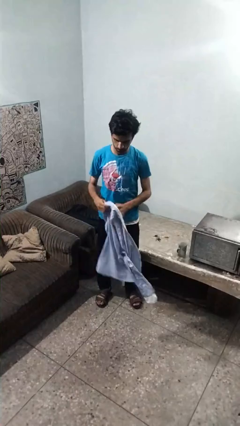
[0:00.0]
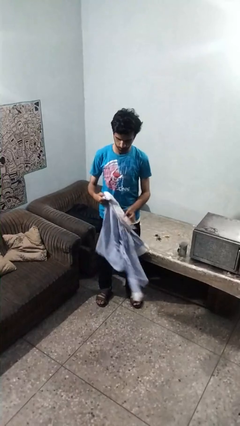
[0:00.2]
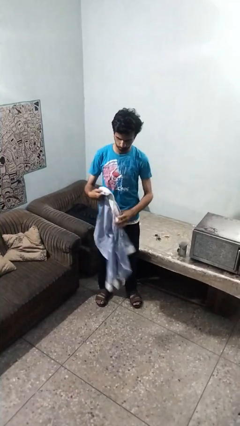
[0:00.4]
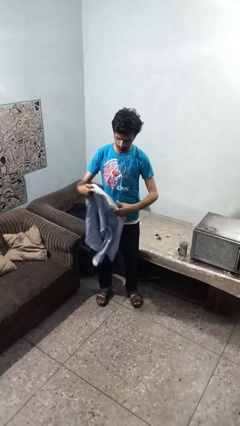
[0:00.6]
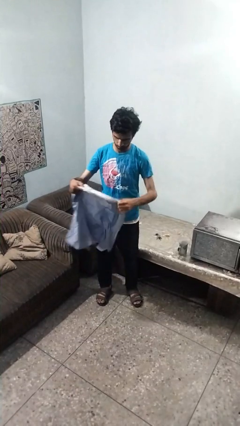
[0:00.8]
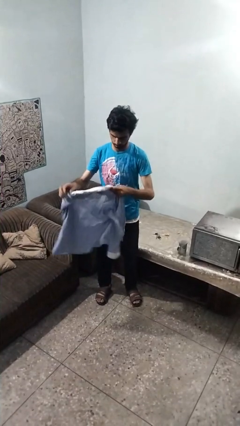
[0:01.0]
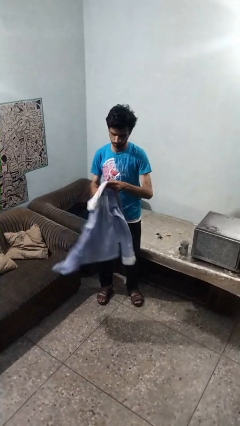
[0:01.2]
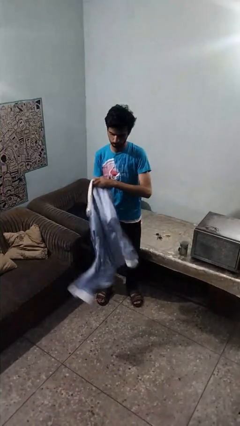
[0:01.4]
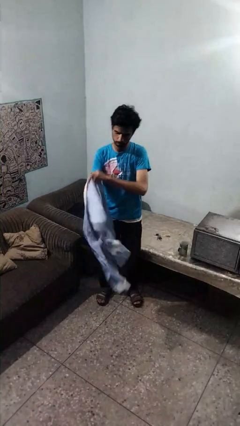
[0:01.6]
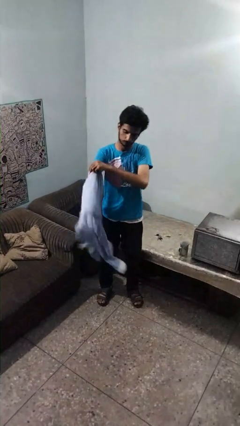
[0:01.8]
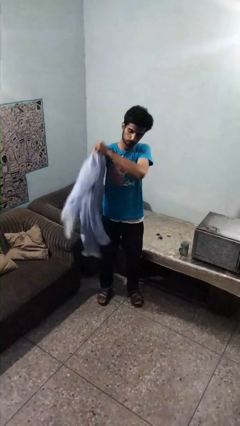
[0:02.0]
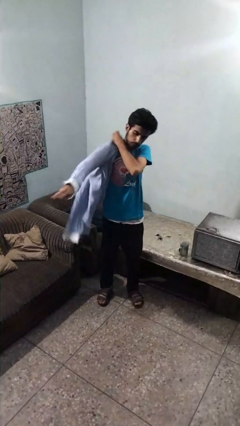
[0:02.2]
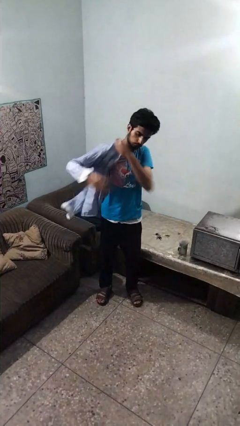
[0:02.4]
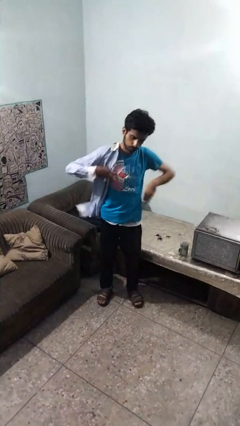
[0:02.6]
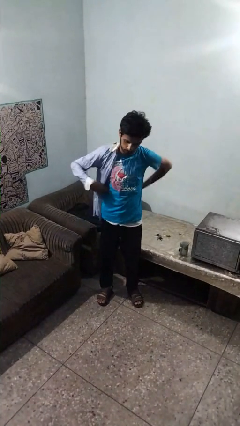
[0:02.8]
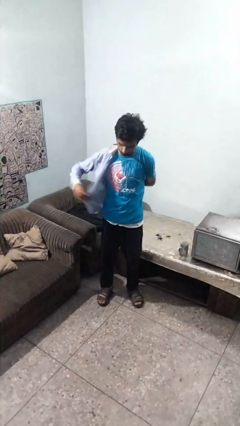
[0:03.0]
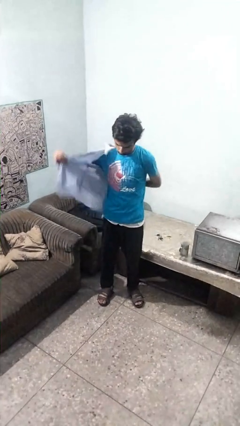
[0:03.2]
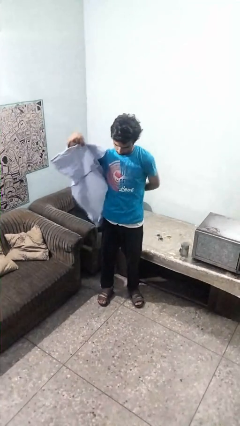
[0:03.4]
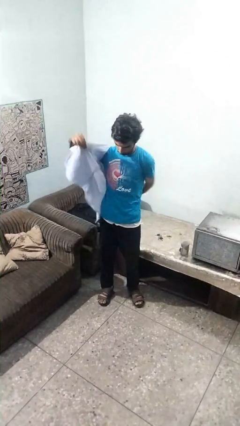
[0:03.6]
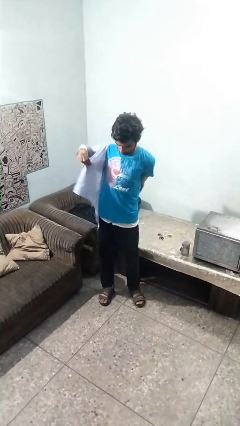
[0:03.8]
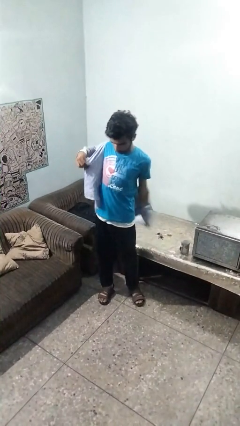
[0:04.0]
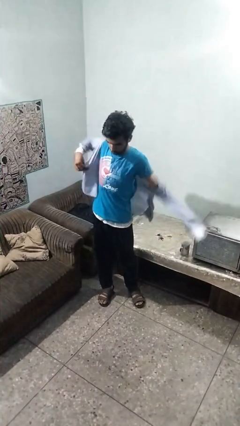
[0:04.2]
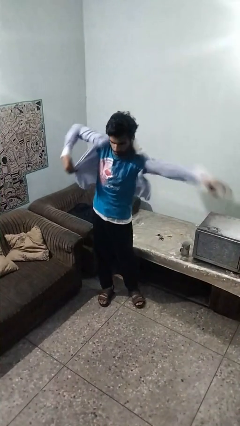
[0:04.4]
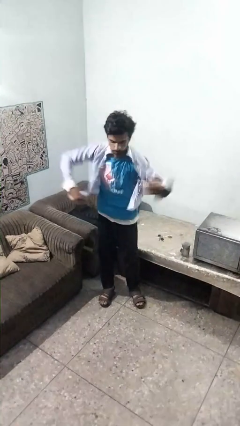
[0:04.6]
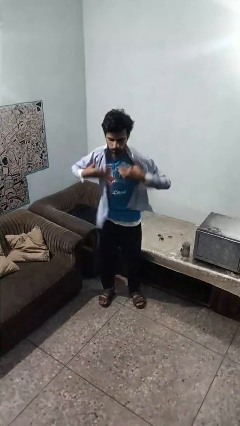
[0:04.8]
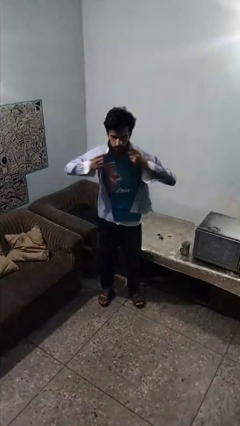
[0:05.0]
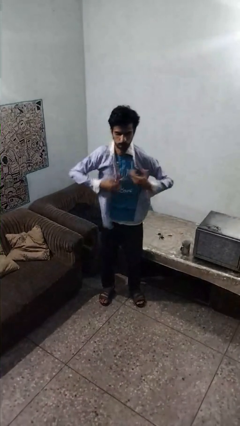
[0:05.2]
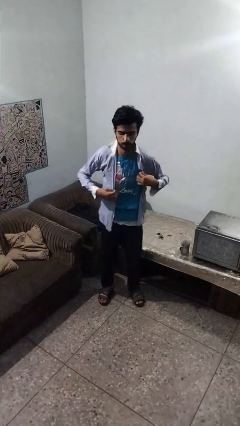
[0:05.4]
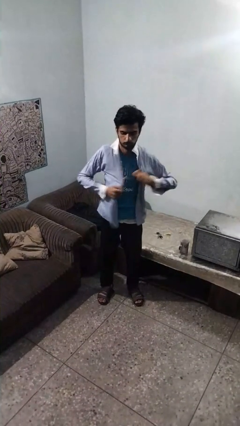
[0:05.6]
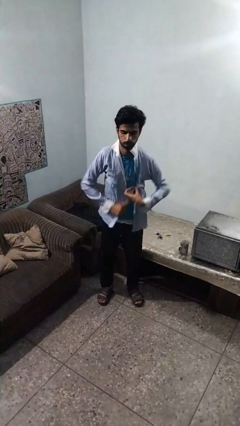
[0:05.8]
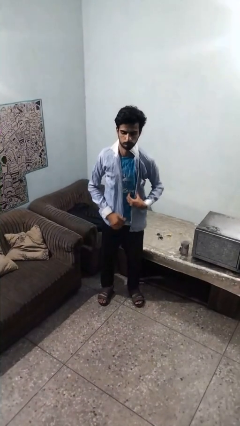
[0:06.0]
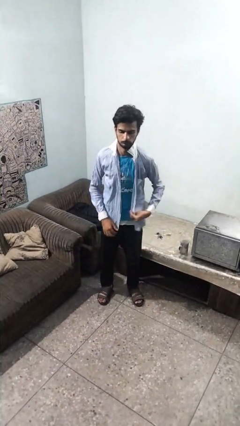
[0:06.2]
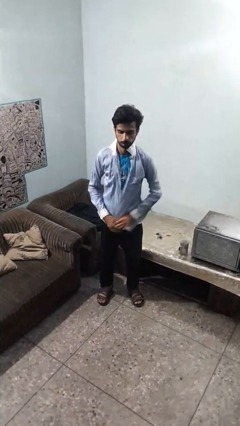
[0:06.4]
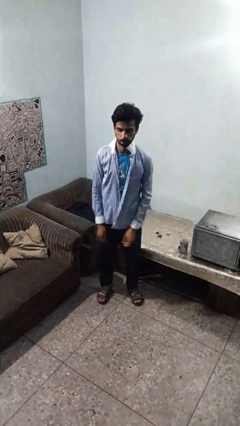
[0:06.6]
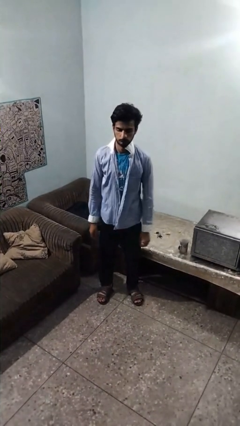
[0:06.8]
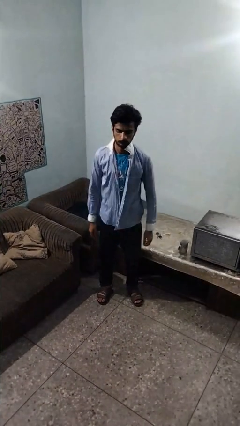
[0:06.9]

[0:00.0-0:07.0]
person puts on shirt

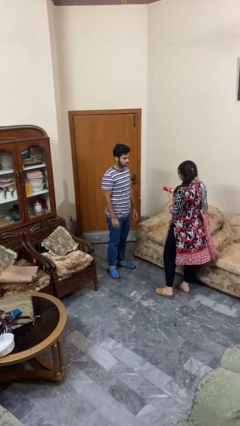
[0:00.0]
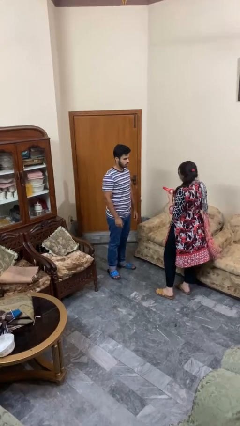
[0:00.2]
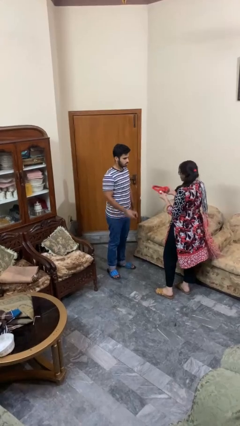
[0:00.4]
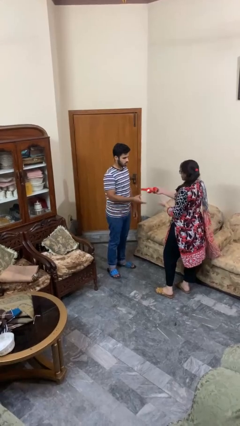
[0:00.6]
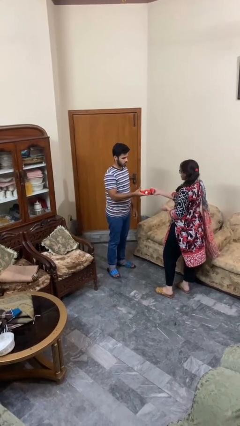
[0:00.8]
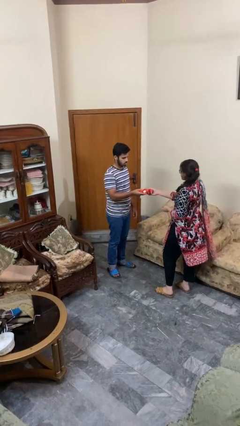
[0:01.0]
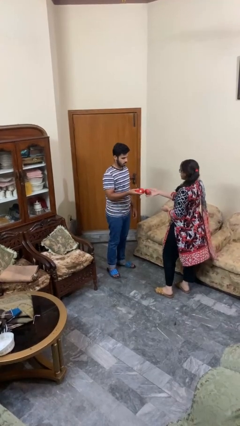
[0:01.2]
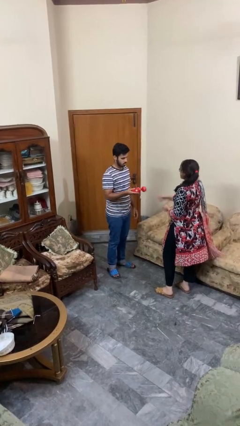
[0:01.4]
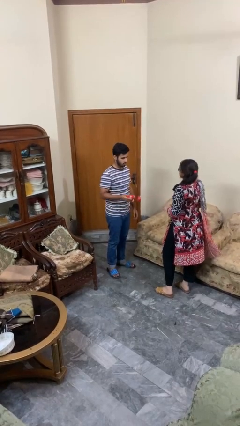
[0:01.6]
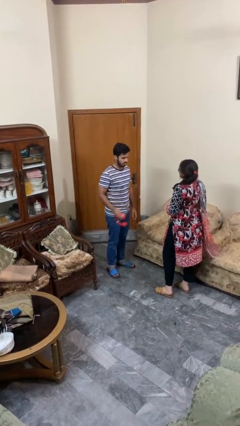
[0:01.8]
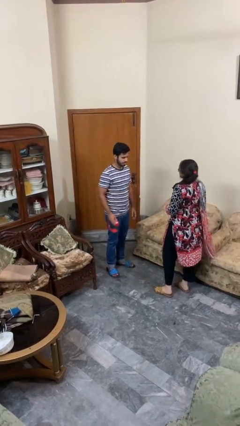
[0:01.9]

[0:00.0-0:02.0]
person transfers object to person

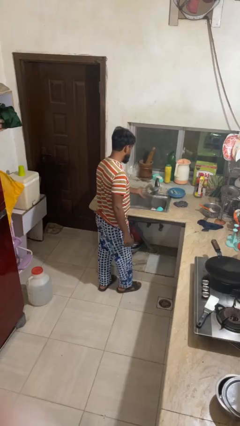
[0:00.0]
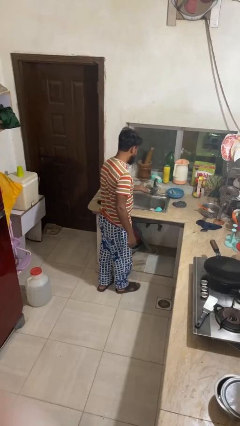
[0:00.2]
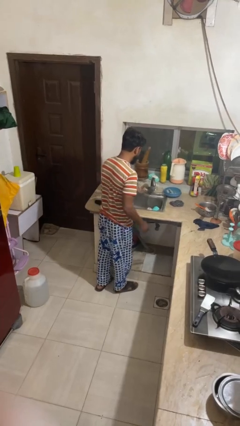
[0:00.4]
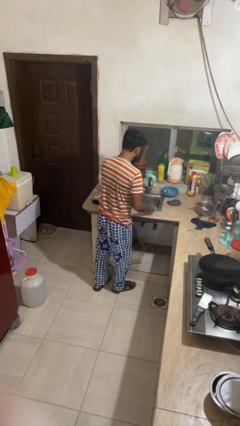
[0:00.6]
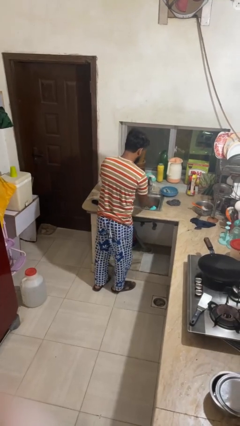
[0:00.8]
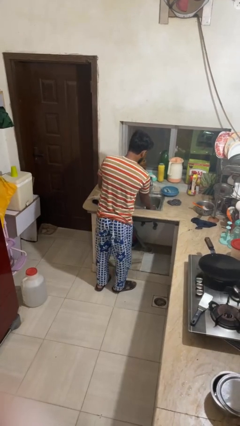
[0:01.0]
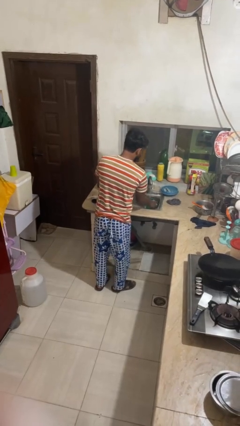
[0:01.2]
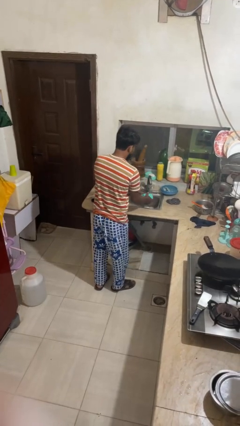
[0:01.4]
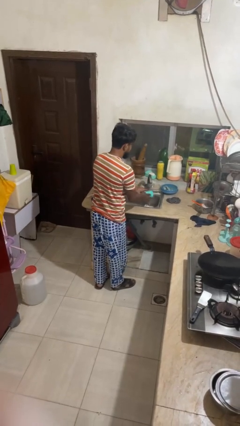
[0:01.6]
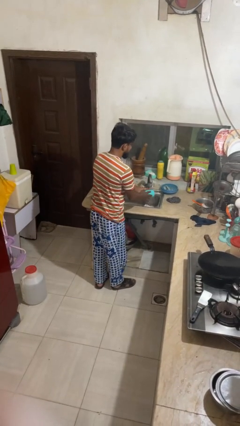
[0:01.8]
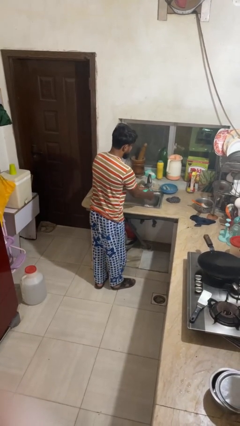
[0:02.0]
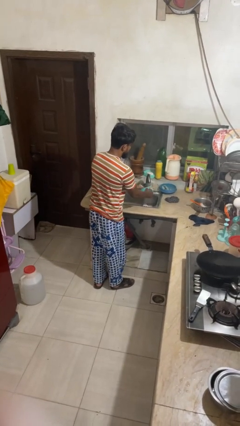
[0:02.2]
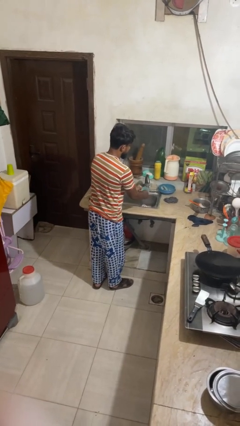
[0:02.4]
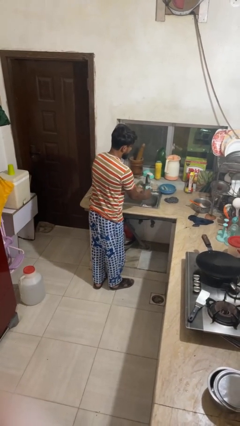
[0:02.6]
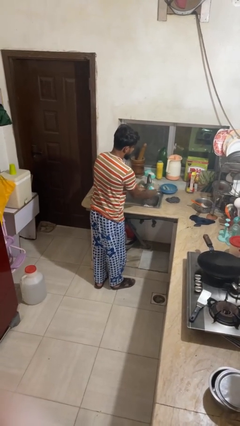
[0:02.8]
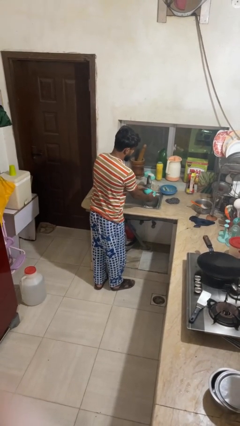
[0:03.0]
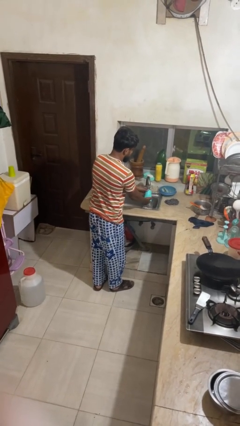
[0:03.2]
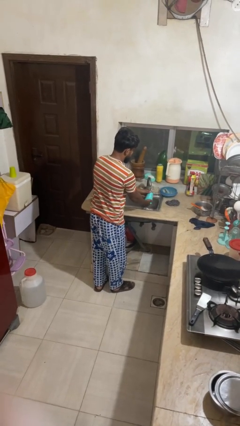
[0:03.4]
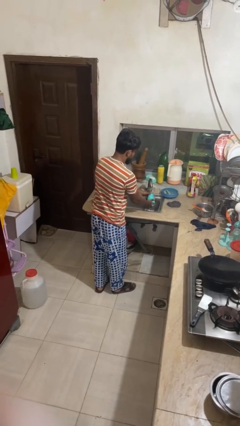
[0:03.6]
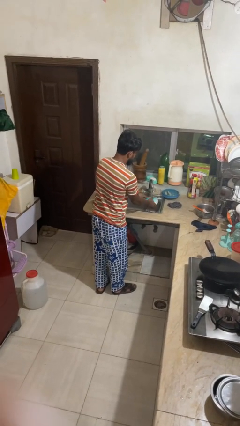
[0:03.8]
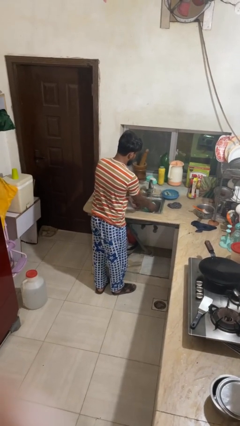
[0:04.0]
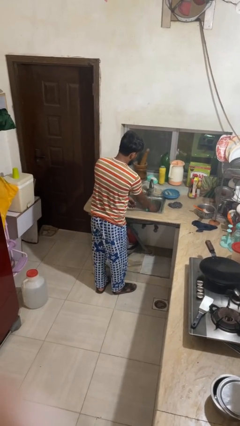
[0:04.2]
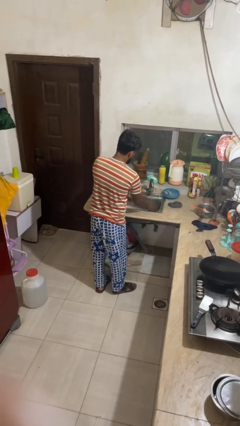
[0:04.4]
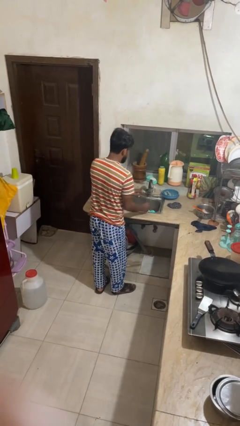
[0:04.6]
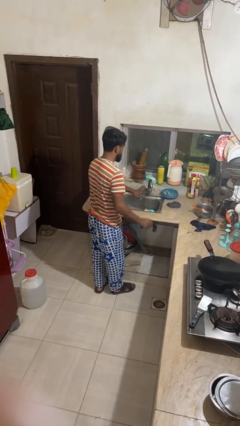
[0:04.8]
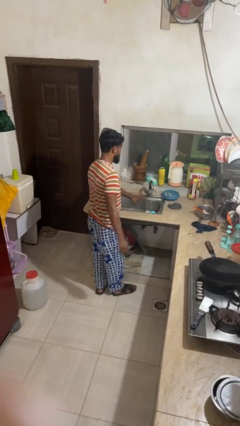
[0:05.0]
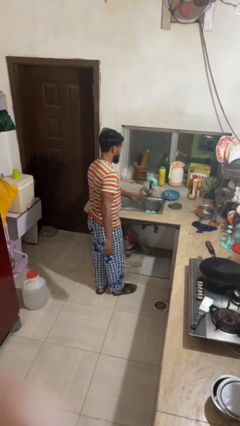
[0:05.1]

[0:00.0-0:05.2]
person washes dish

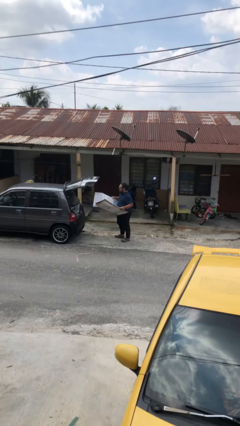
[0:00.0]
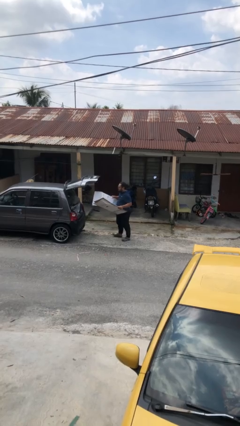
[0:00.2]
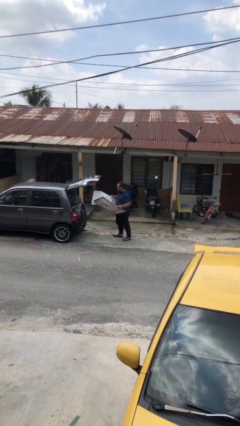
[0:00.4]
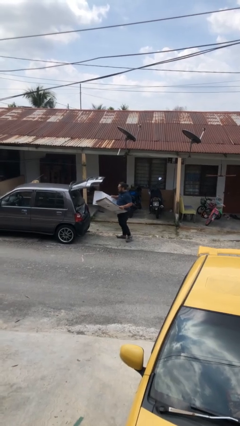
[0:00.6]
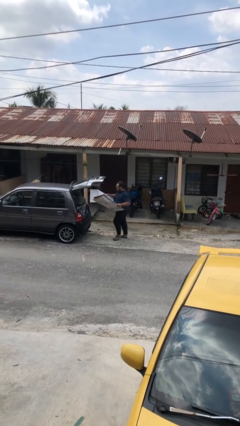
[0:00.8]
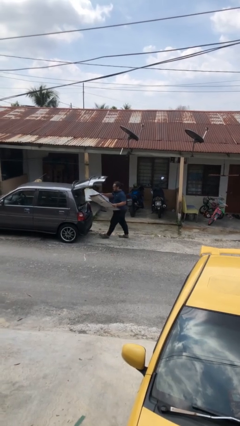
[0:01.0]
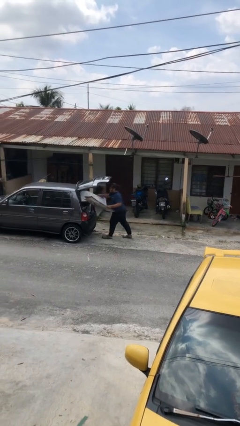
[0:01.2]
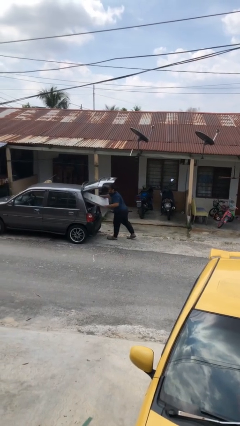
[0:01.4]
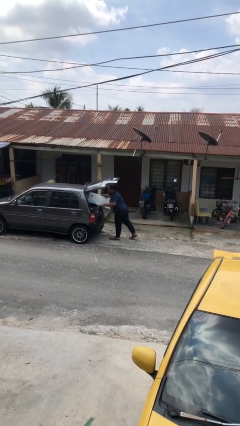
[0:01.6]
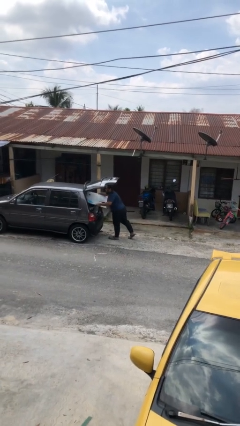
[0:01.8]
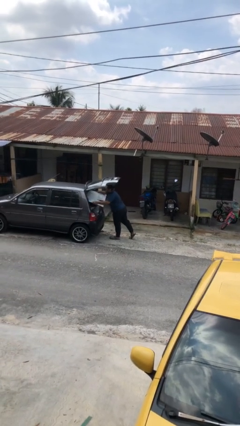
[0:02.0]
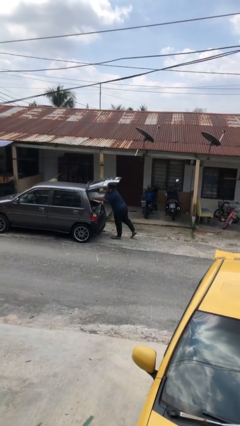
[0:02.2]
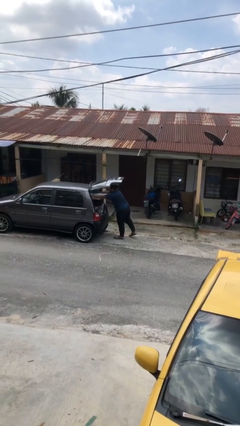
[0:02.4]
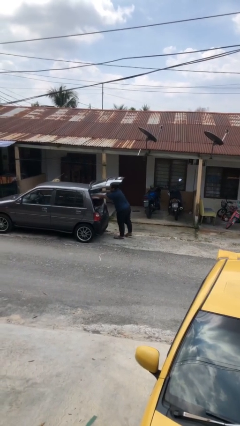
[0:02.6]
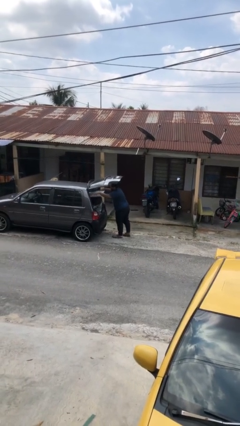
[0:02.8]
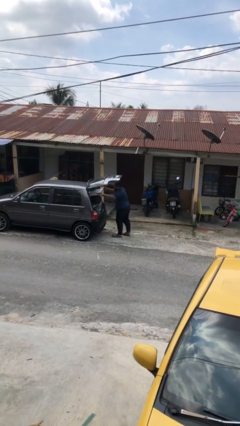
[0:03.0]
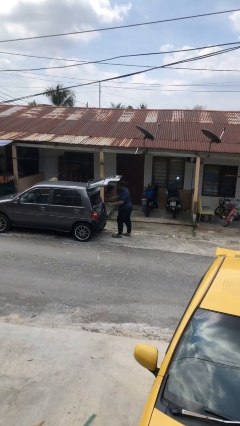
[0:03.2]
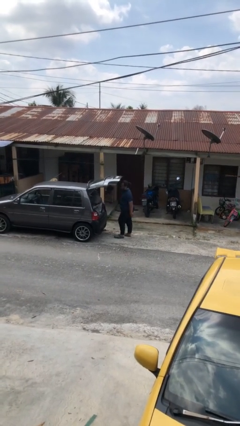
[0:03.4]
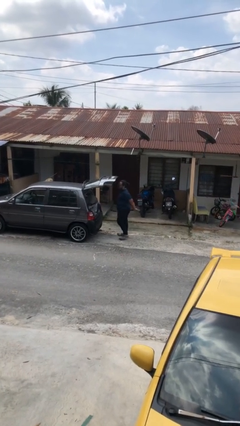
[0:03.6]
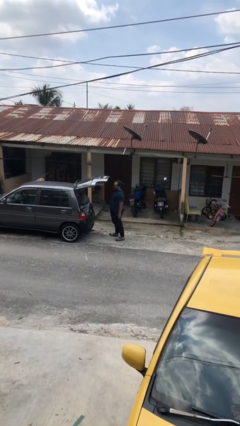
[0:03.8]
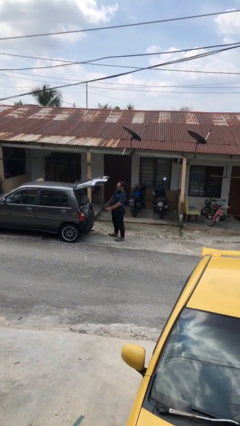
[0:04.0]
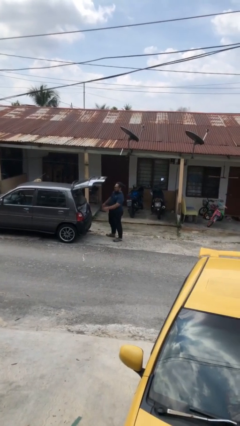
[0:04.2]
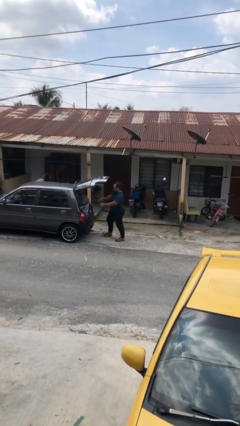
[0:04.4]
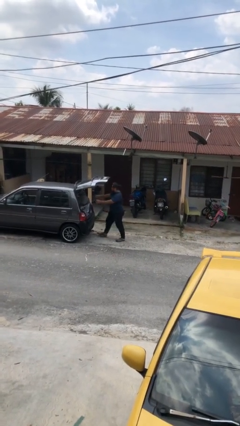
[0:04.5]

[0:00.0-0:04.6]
person loads car
